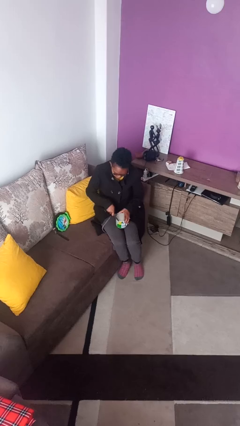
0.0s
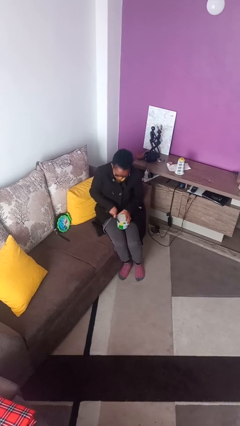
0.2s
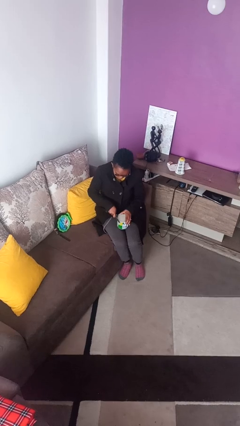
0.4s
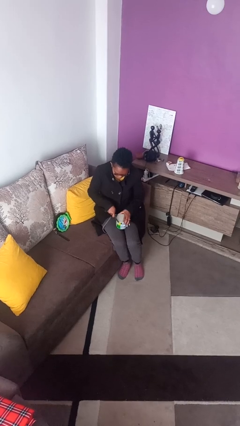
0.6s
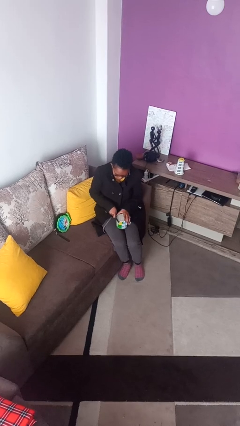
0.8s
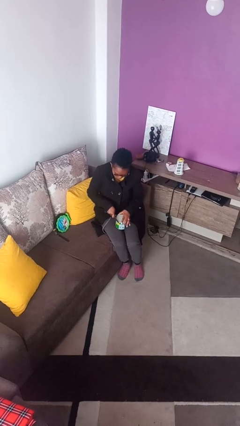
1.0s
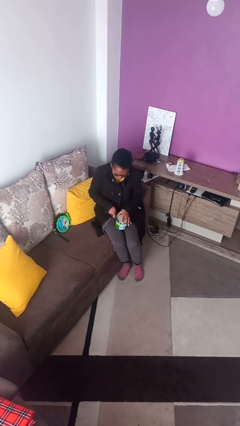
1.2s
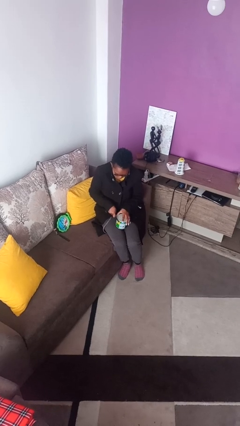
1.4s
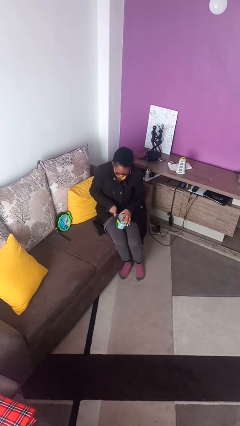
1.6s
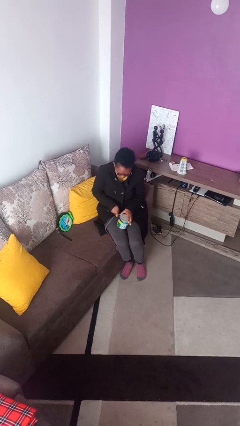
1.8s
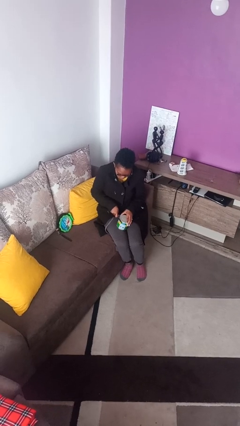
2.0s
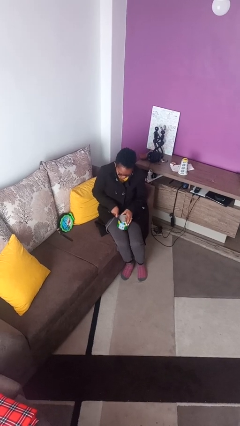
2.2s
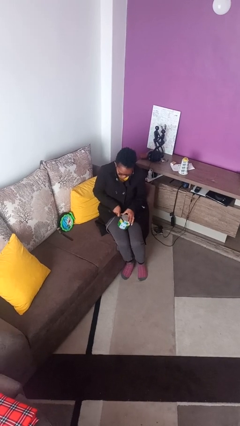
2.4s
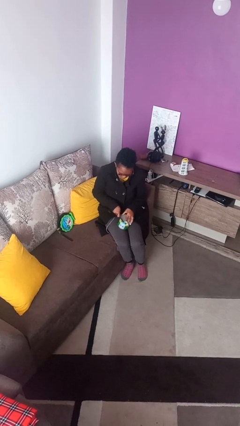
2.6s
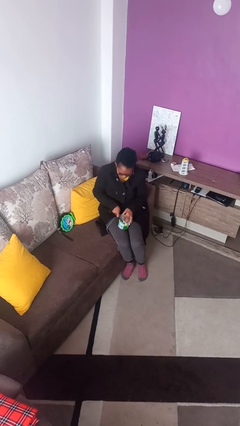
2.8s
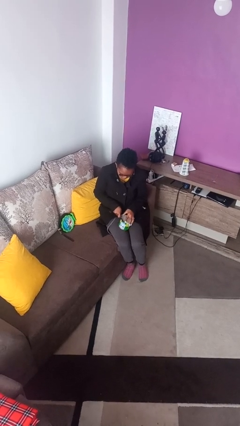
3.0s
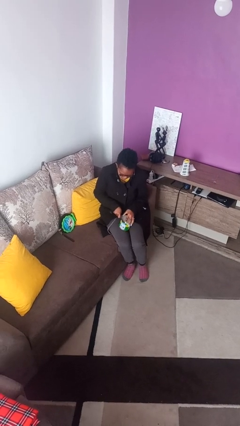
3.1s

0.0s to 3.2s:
person opens can with can opener

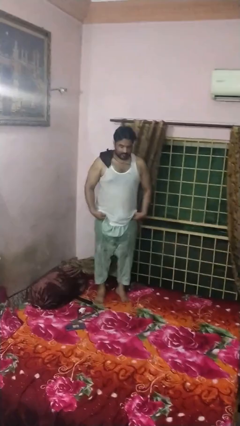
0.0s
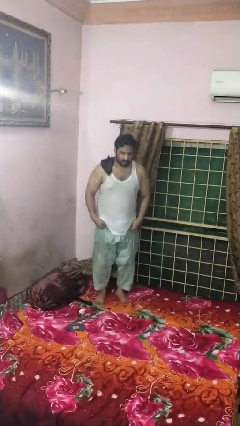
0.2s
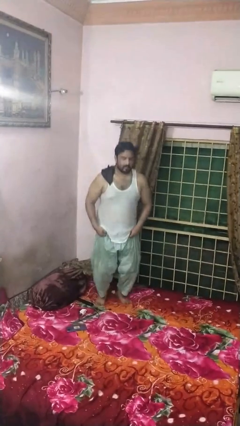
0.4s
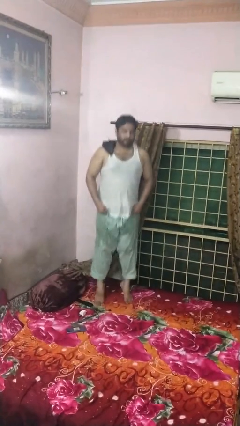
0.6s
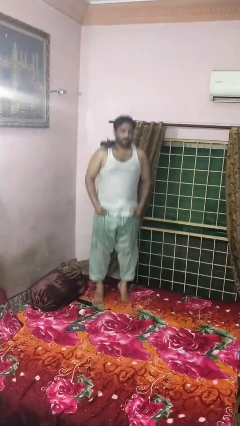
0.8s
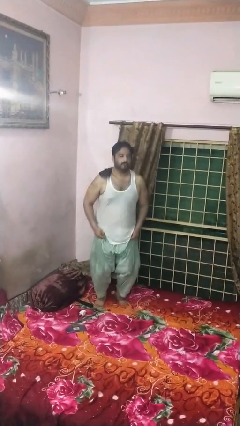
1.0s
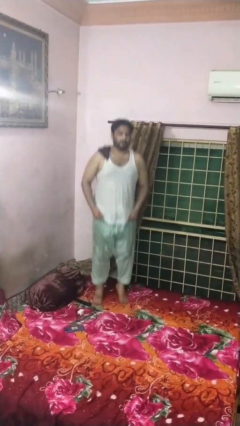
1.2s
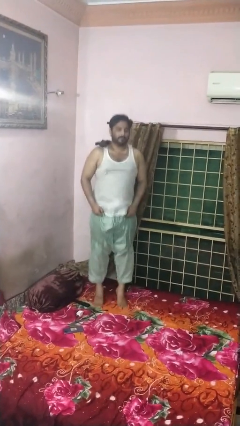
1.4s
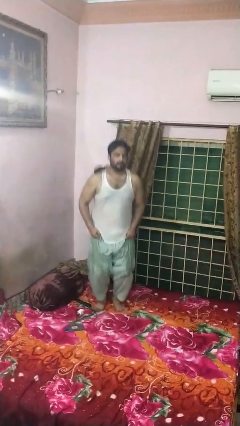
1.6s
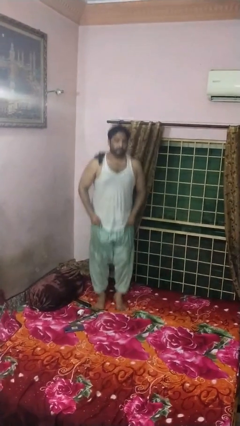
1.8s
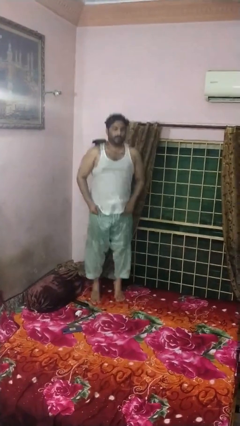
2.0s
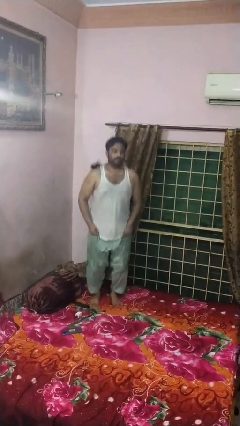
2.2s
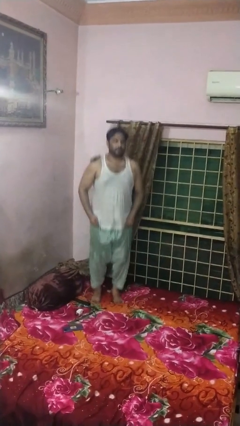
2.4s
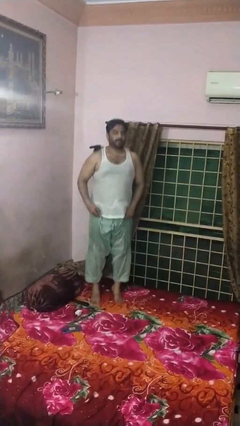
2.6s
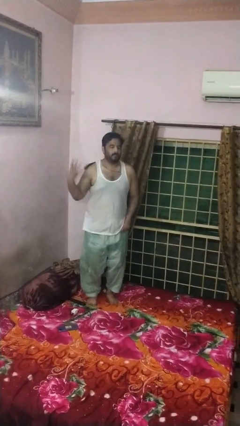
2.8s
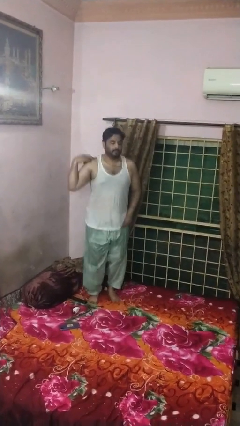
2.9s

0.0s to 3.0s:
person jumps on bed

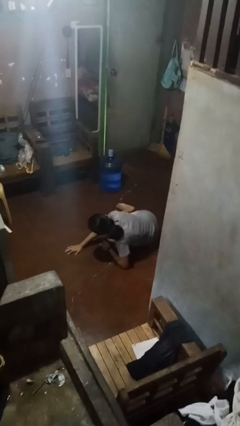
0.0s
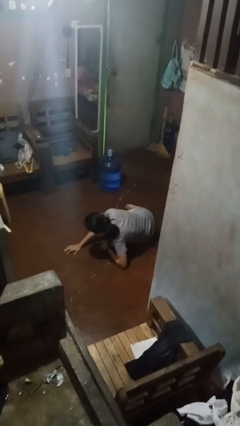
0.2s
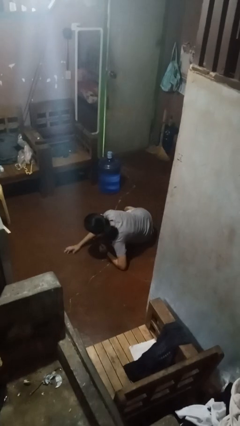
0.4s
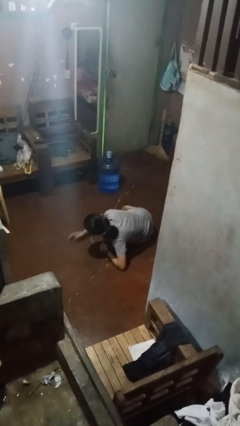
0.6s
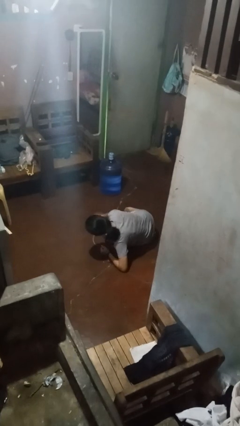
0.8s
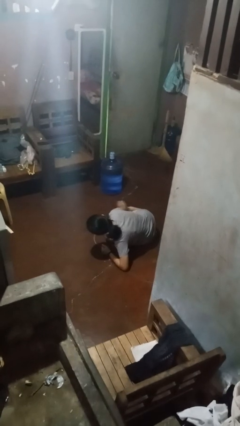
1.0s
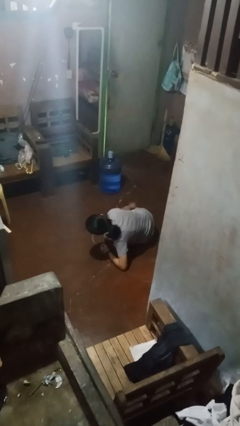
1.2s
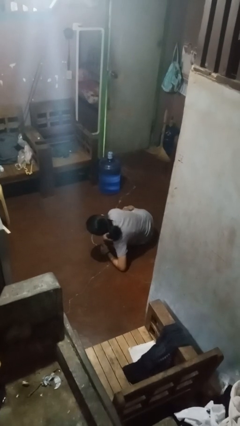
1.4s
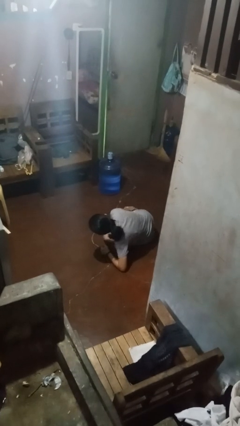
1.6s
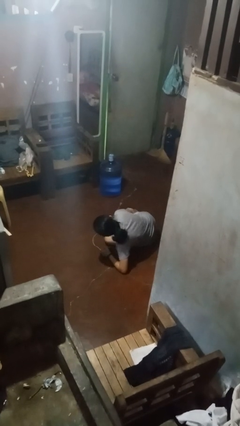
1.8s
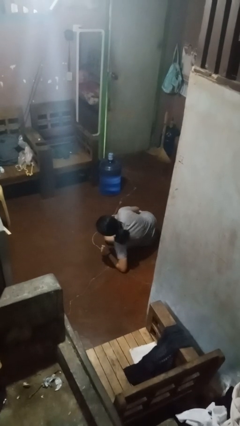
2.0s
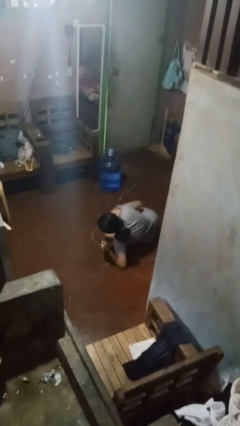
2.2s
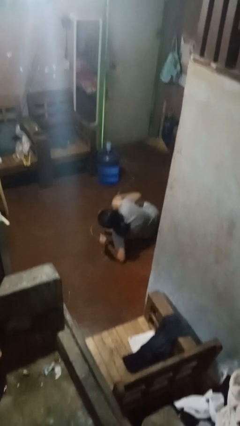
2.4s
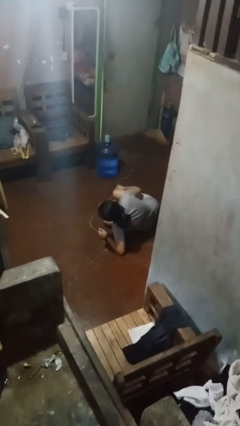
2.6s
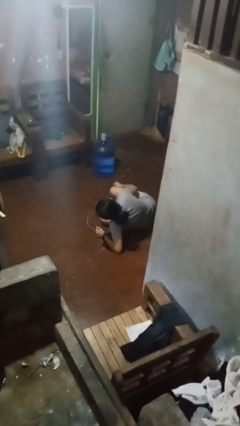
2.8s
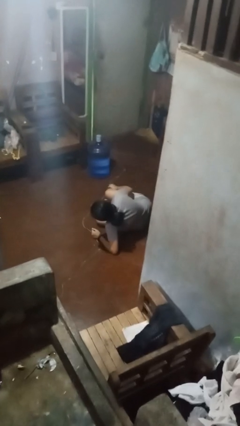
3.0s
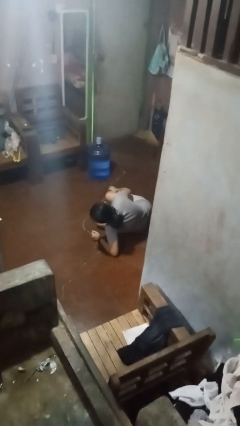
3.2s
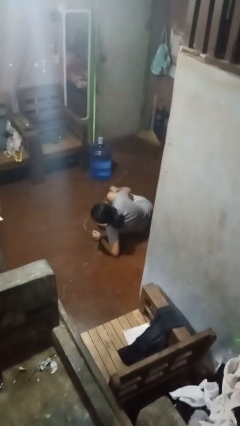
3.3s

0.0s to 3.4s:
person lies down on floor

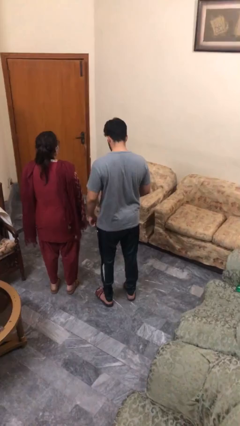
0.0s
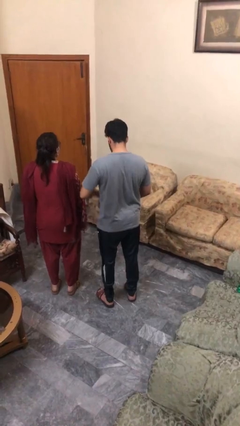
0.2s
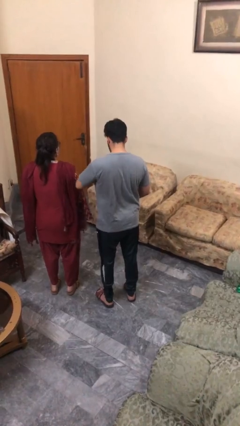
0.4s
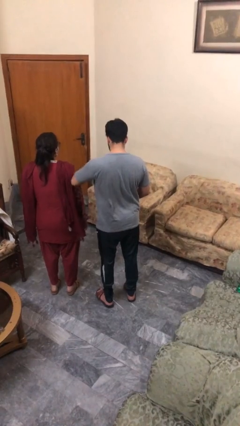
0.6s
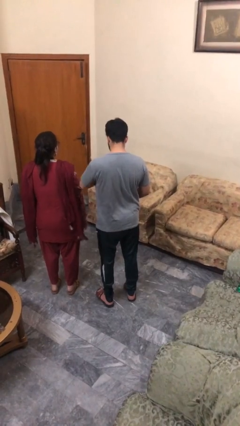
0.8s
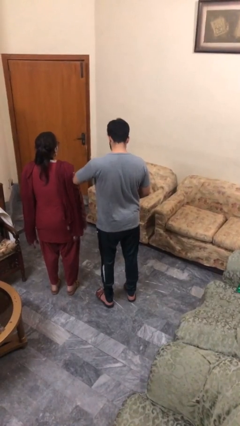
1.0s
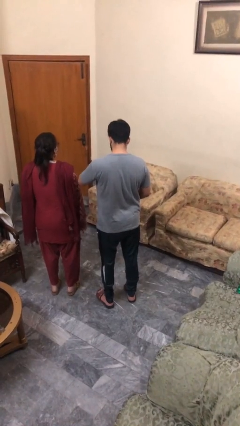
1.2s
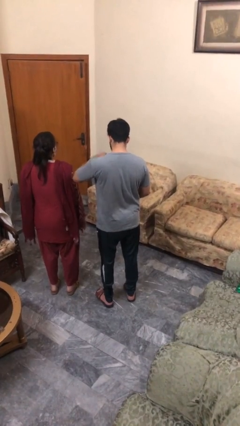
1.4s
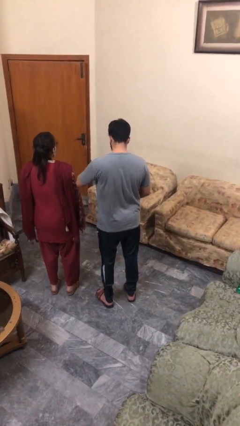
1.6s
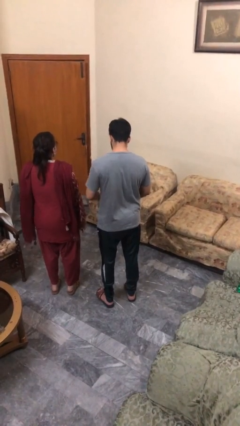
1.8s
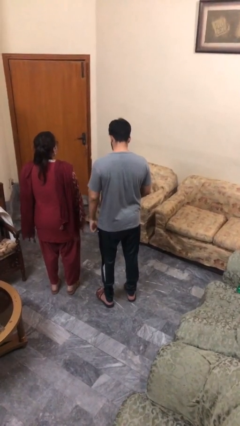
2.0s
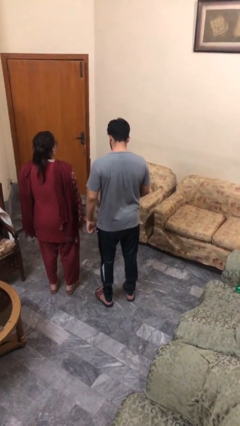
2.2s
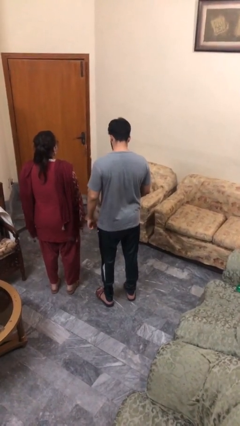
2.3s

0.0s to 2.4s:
person nudges person with elbow

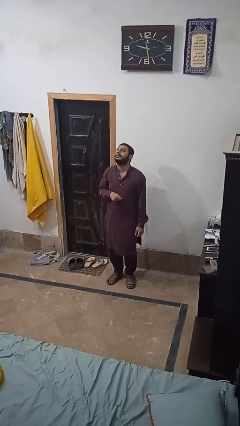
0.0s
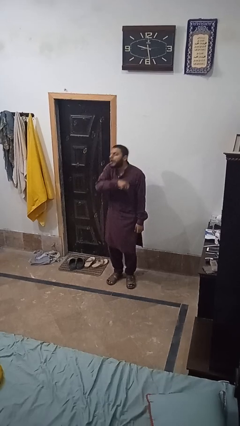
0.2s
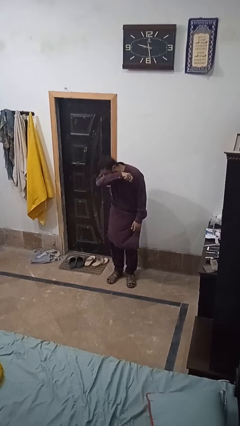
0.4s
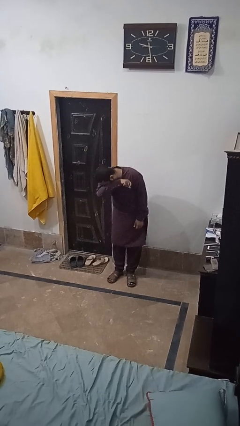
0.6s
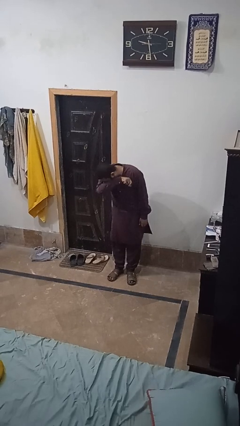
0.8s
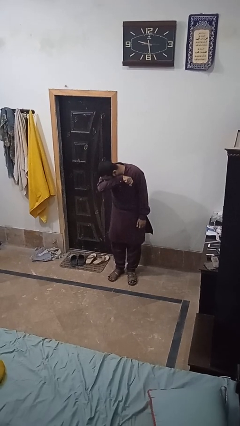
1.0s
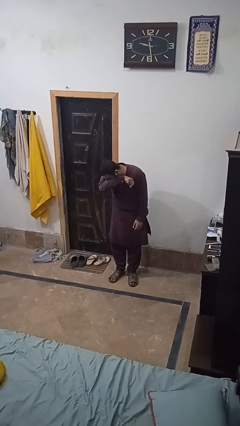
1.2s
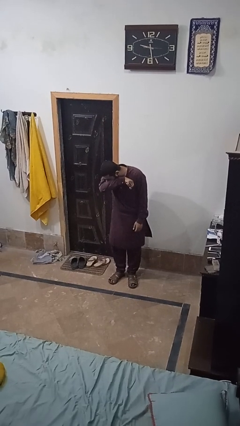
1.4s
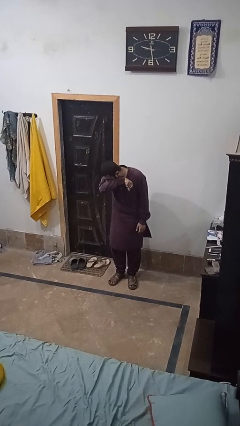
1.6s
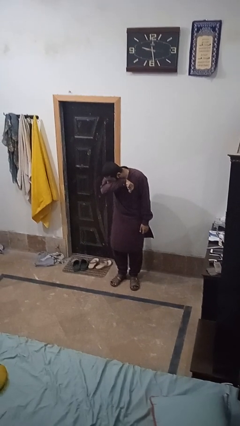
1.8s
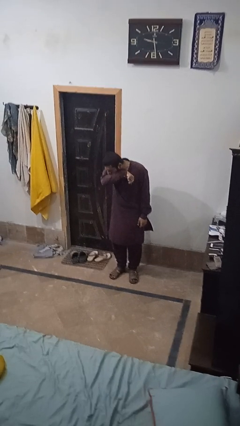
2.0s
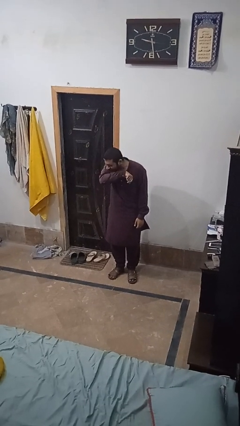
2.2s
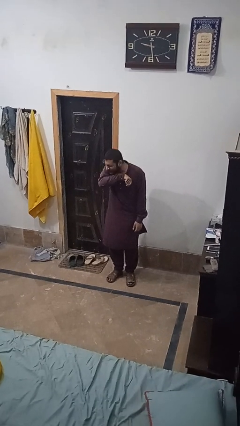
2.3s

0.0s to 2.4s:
person sneezes into arm

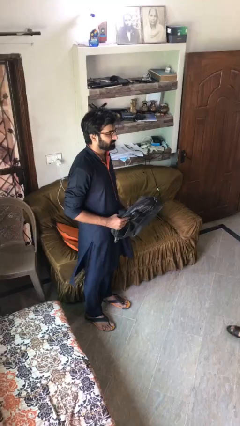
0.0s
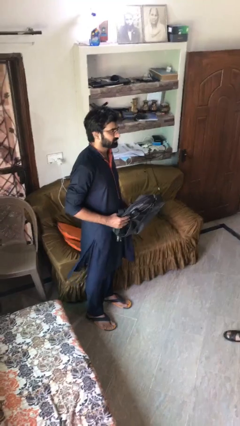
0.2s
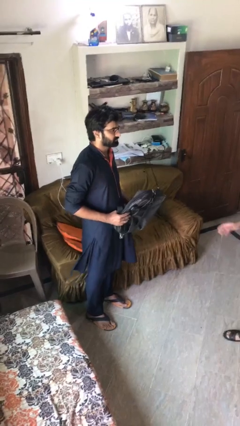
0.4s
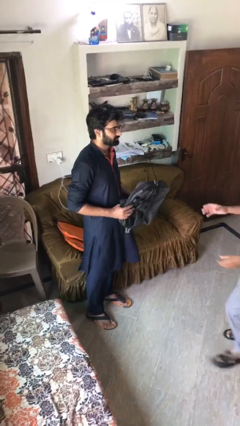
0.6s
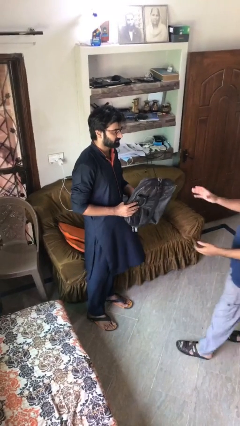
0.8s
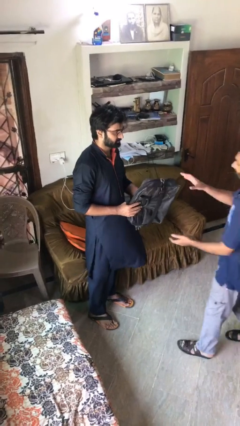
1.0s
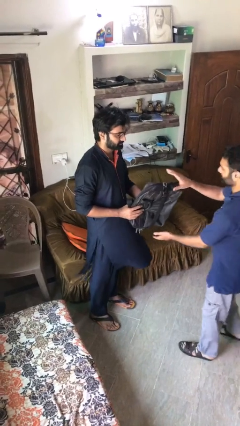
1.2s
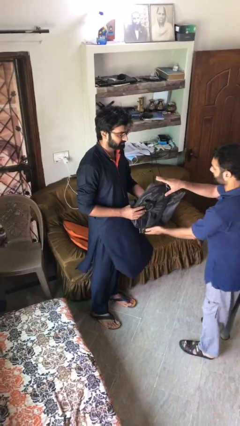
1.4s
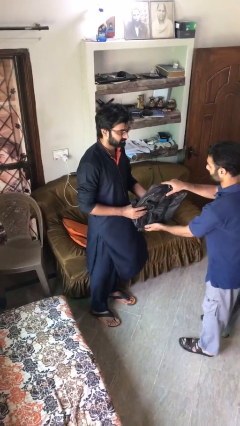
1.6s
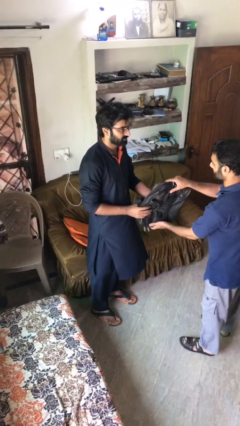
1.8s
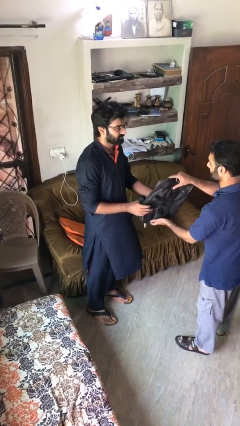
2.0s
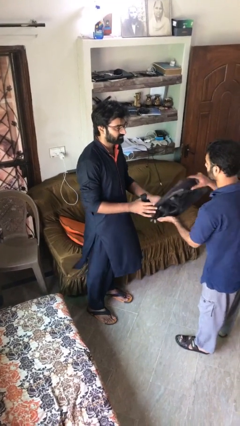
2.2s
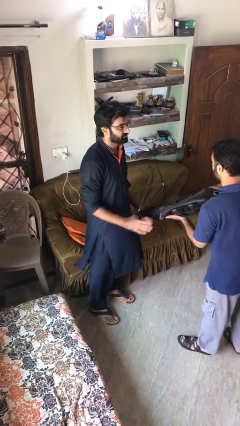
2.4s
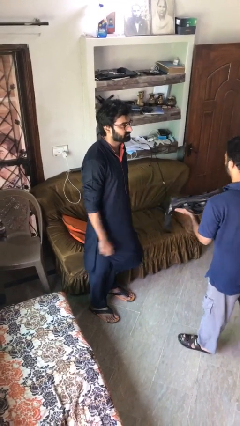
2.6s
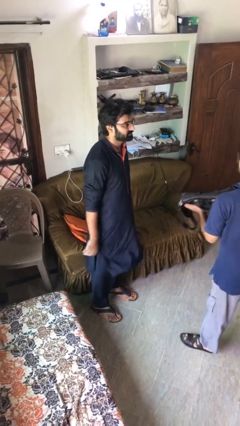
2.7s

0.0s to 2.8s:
person transfers object to person
